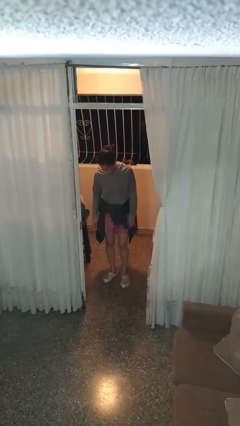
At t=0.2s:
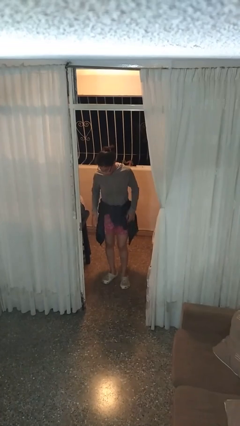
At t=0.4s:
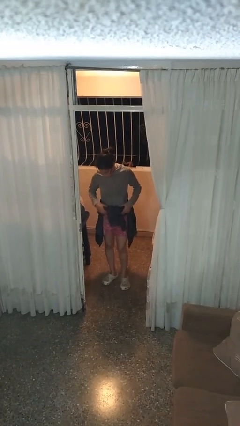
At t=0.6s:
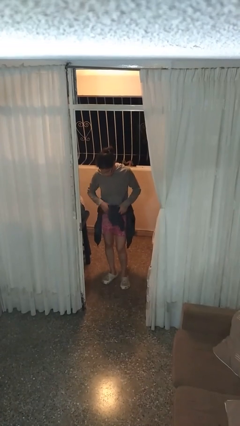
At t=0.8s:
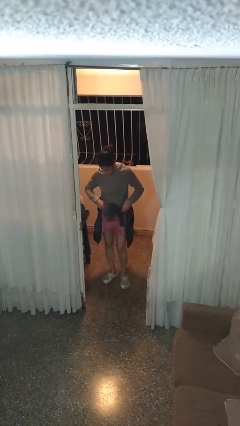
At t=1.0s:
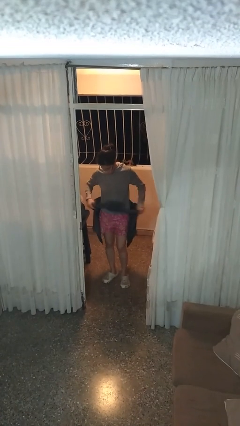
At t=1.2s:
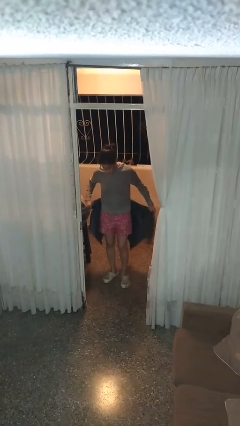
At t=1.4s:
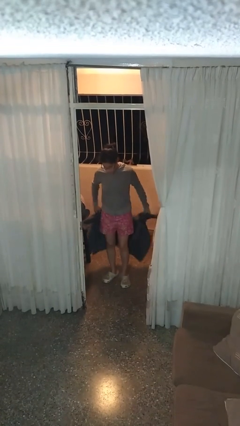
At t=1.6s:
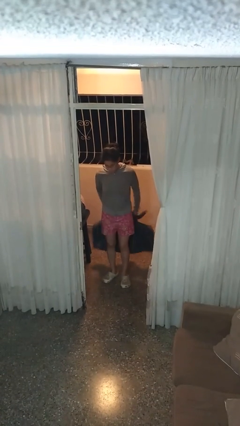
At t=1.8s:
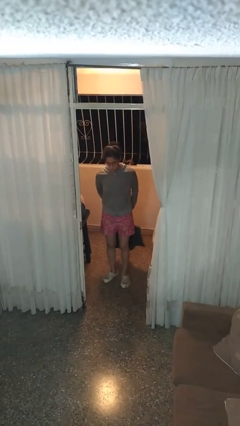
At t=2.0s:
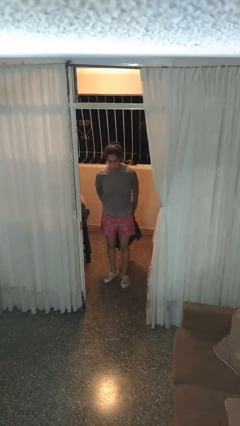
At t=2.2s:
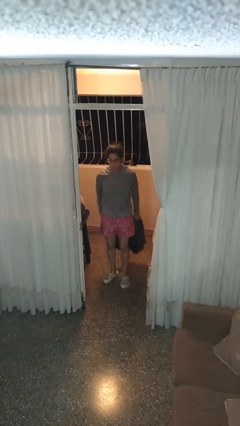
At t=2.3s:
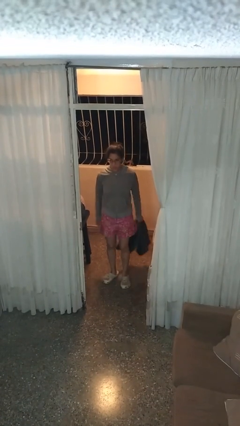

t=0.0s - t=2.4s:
person unties jacket around waist

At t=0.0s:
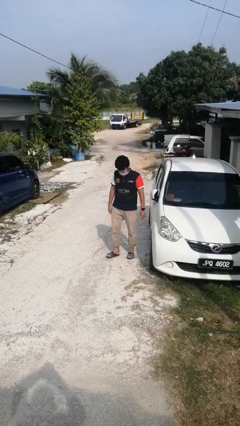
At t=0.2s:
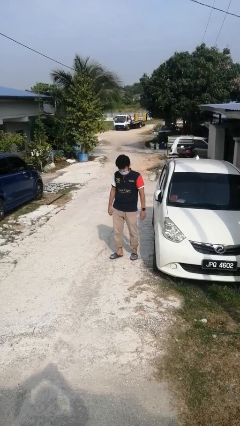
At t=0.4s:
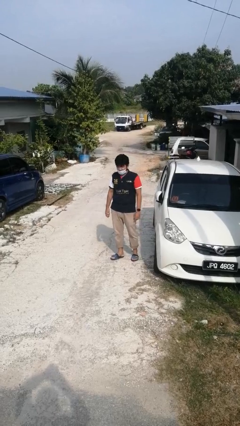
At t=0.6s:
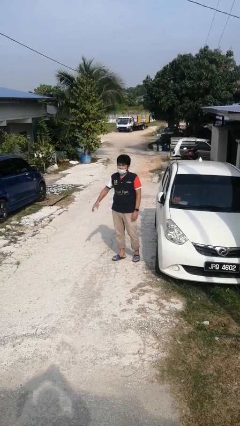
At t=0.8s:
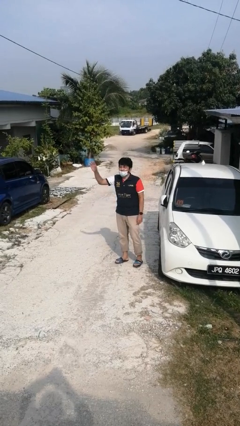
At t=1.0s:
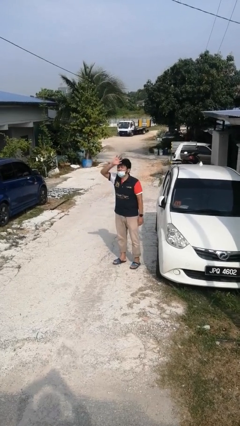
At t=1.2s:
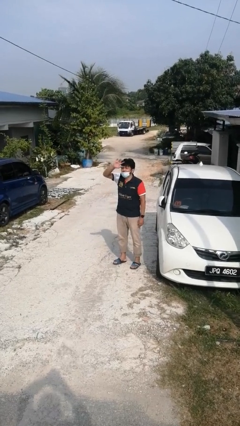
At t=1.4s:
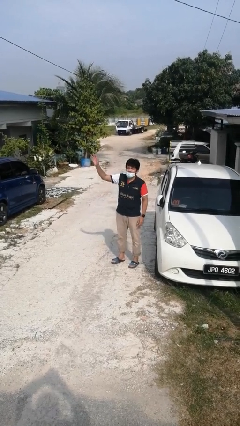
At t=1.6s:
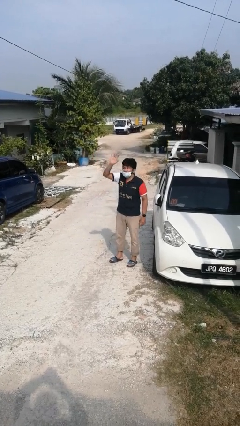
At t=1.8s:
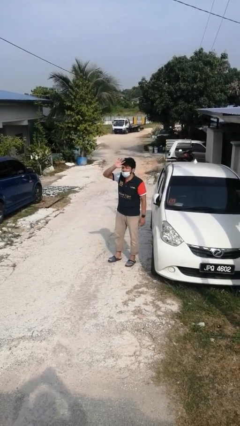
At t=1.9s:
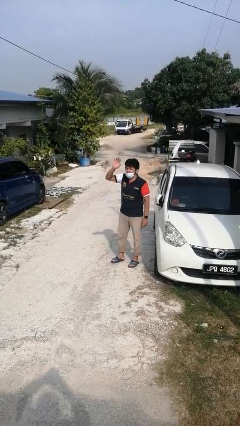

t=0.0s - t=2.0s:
person waves at person

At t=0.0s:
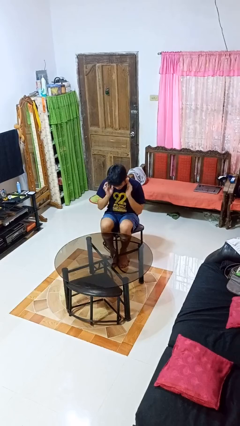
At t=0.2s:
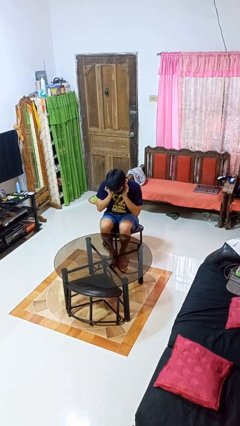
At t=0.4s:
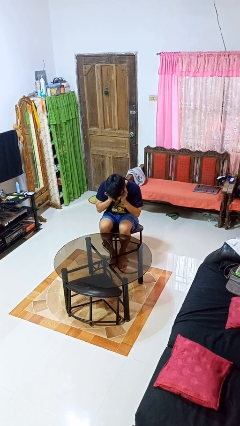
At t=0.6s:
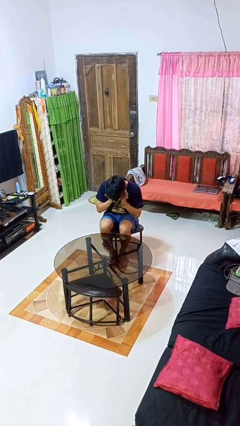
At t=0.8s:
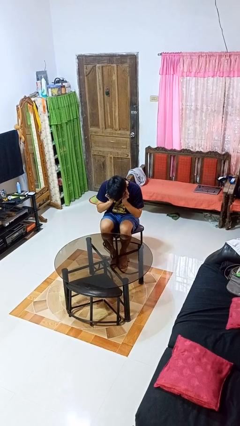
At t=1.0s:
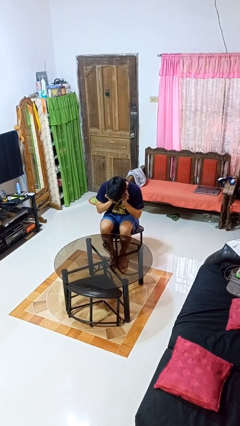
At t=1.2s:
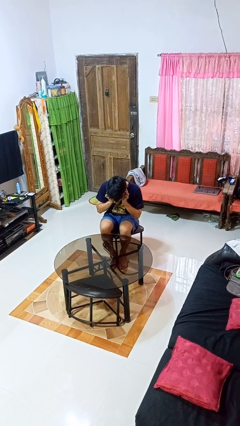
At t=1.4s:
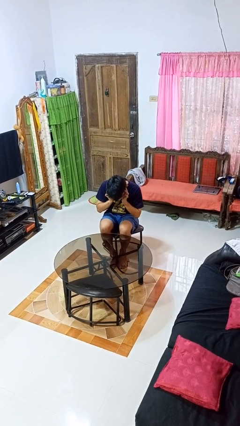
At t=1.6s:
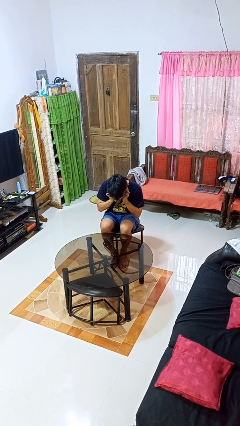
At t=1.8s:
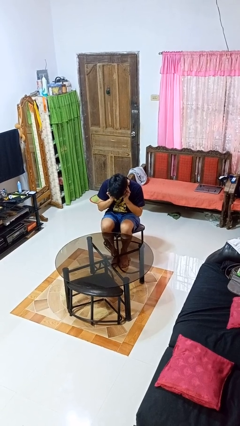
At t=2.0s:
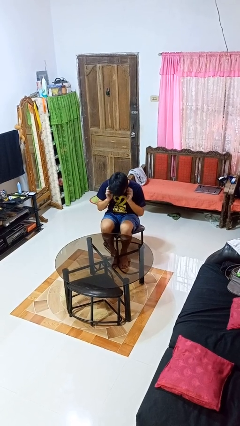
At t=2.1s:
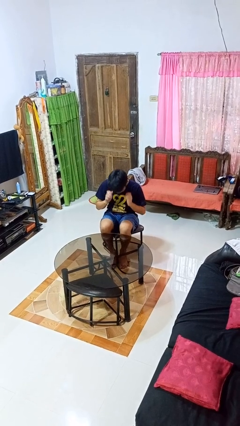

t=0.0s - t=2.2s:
person puts fingers in ear

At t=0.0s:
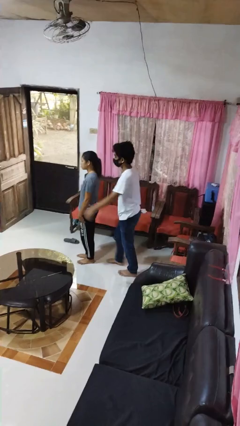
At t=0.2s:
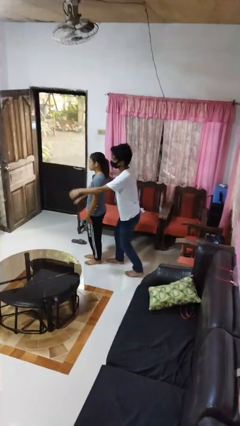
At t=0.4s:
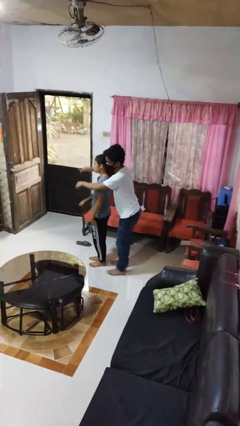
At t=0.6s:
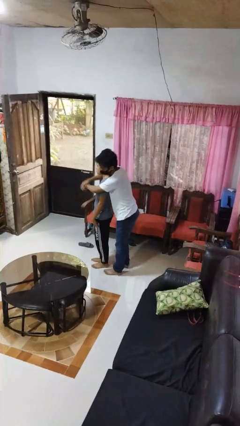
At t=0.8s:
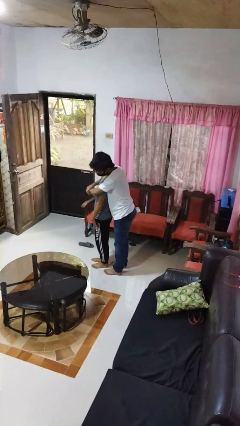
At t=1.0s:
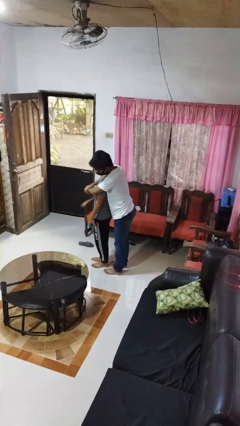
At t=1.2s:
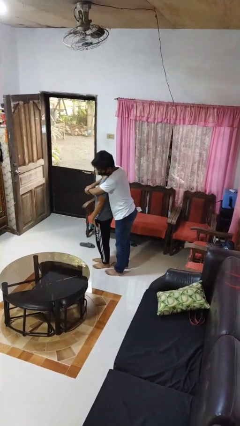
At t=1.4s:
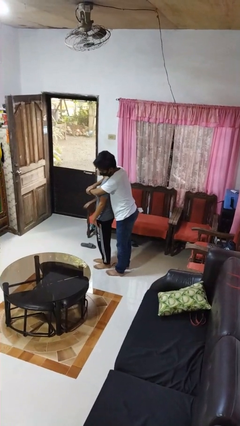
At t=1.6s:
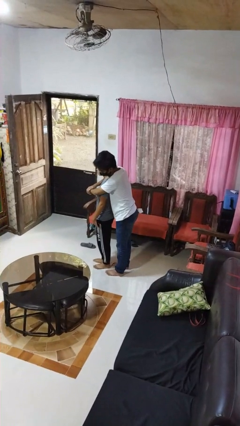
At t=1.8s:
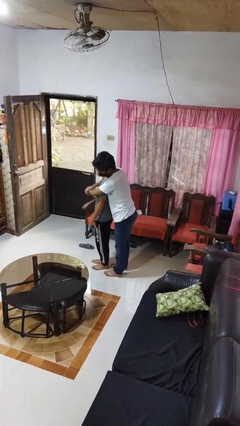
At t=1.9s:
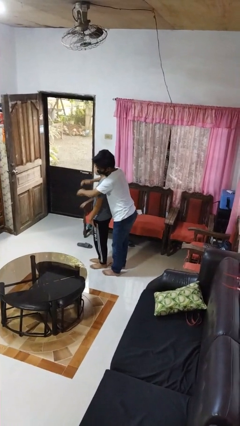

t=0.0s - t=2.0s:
person hugs person from behind

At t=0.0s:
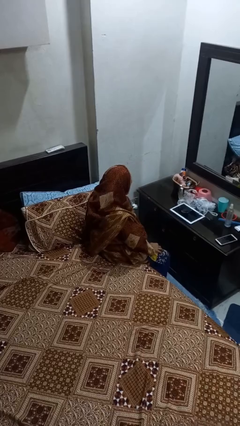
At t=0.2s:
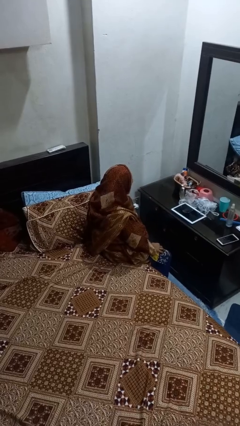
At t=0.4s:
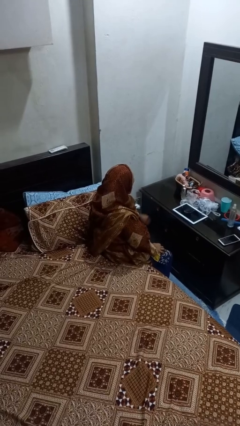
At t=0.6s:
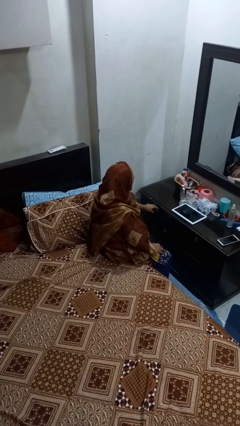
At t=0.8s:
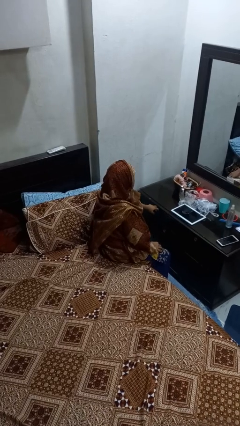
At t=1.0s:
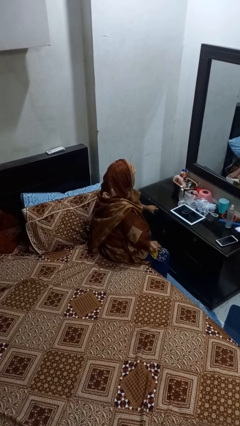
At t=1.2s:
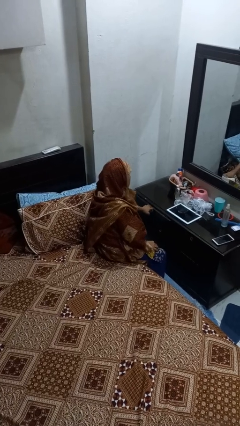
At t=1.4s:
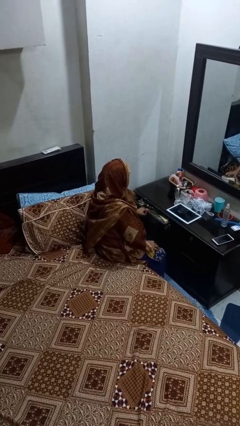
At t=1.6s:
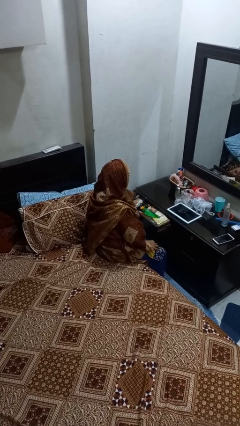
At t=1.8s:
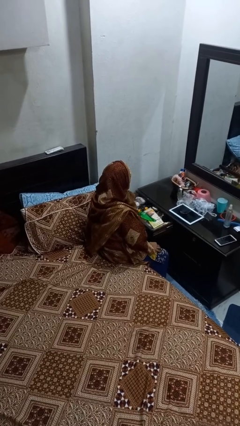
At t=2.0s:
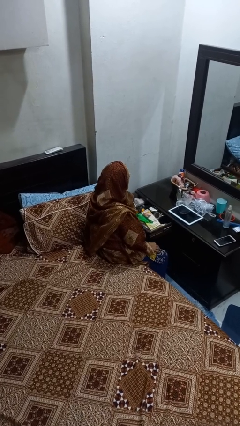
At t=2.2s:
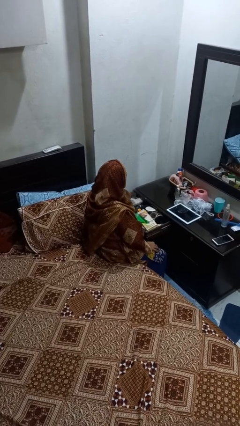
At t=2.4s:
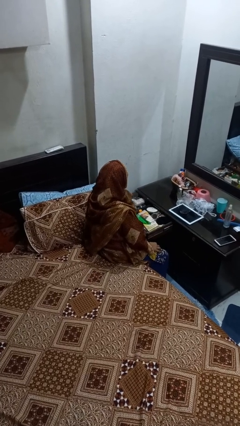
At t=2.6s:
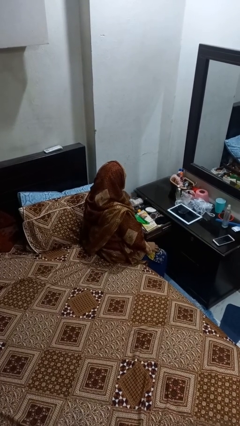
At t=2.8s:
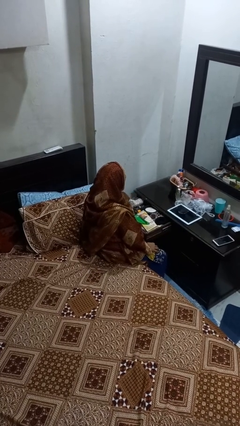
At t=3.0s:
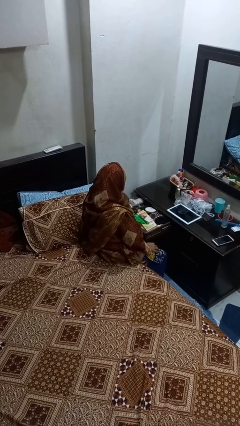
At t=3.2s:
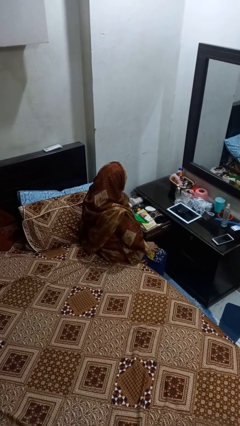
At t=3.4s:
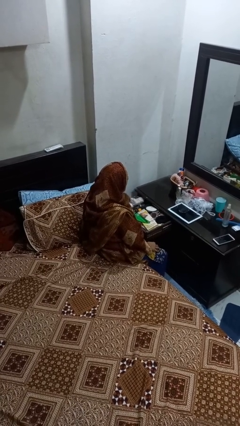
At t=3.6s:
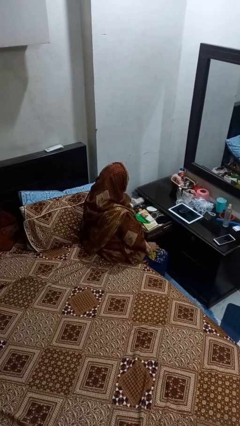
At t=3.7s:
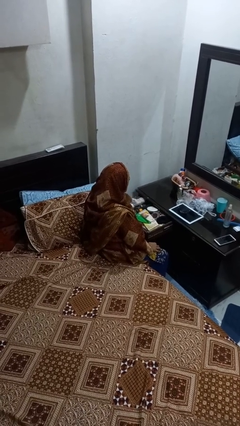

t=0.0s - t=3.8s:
person opens dresser drawer

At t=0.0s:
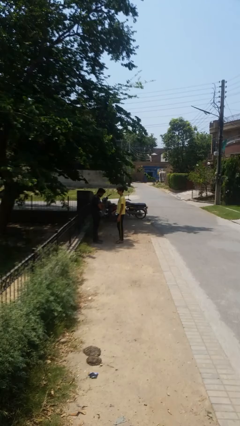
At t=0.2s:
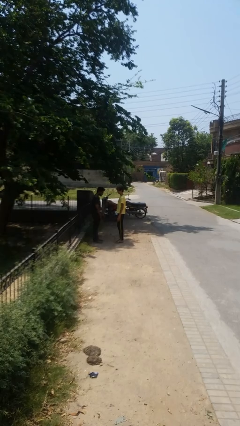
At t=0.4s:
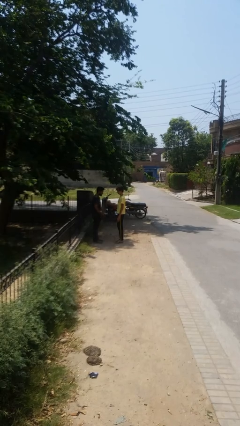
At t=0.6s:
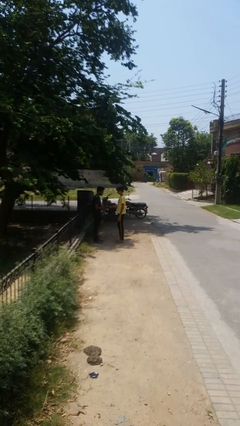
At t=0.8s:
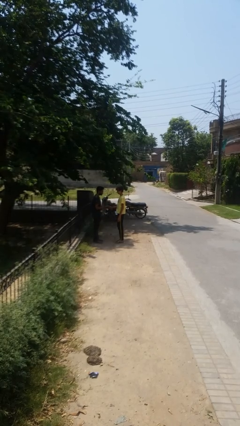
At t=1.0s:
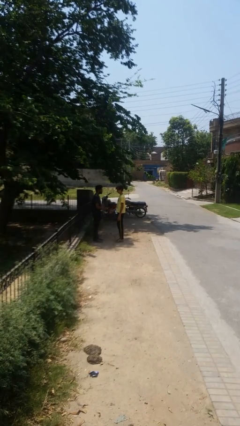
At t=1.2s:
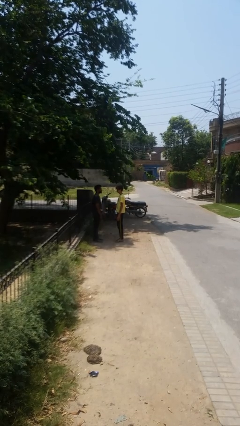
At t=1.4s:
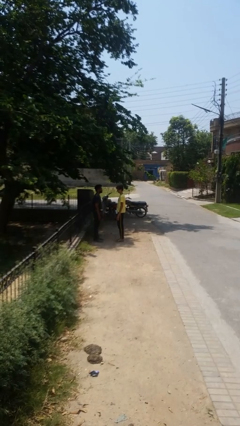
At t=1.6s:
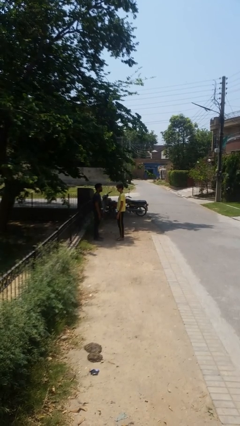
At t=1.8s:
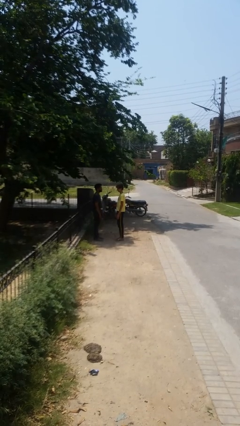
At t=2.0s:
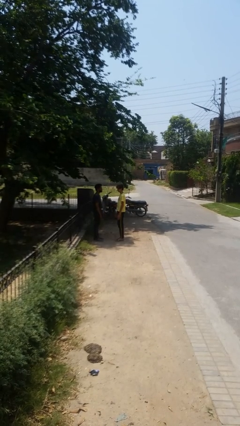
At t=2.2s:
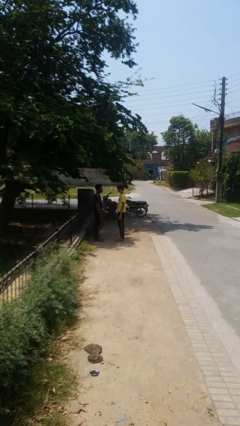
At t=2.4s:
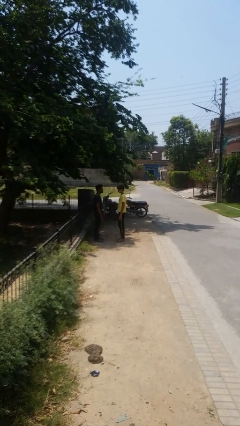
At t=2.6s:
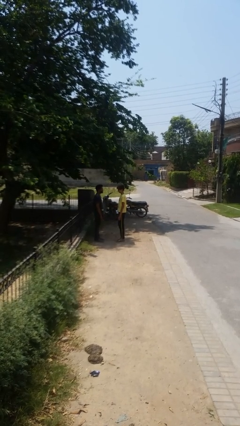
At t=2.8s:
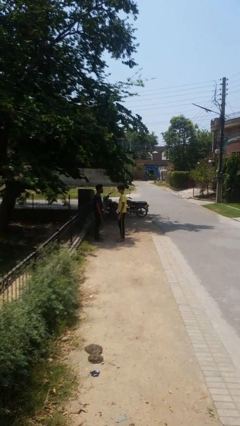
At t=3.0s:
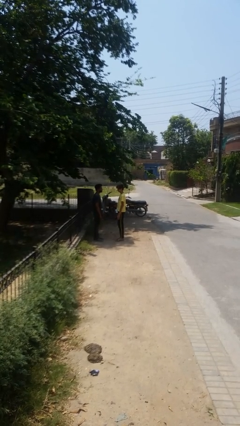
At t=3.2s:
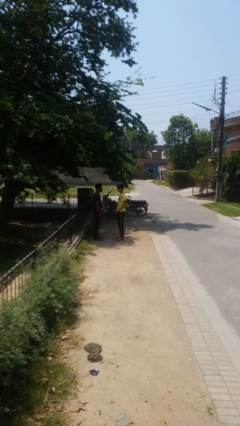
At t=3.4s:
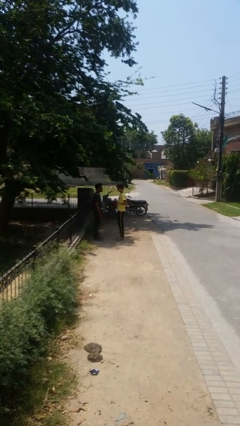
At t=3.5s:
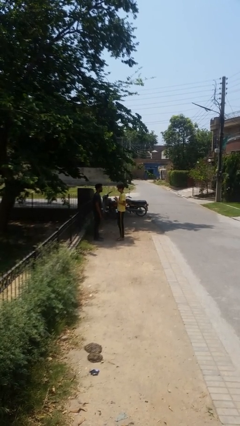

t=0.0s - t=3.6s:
person highfives hand

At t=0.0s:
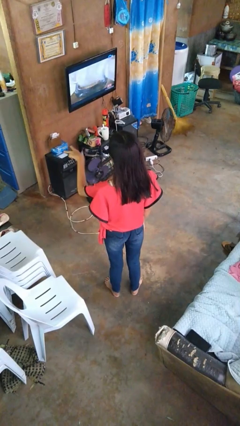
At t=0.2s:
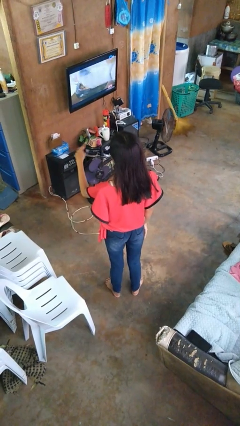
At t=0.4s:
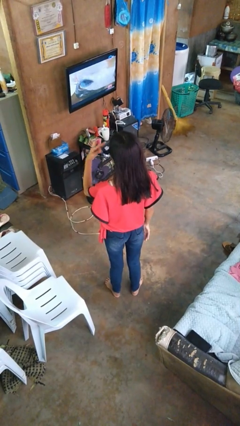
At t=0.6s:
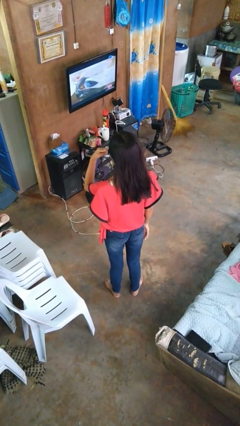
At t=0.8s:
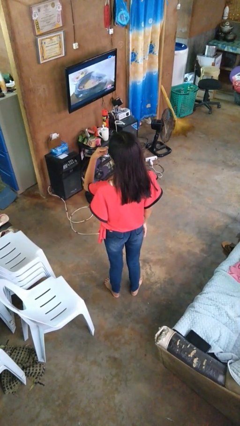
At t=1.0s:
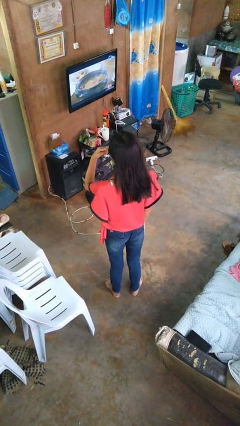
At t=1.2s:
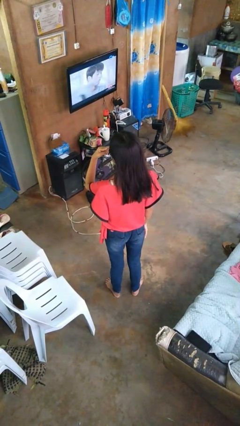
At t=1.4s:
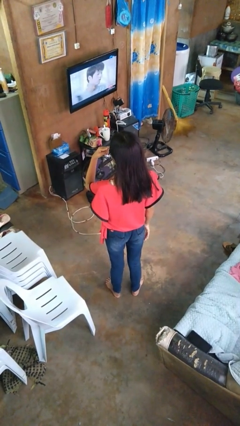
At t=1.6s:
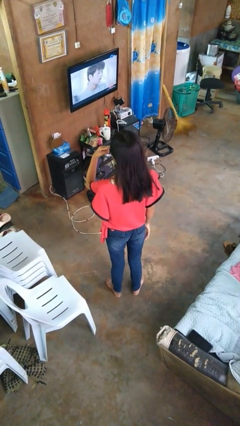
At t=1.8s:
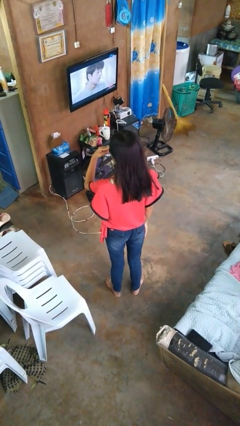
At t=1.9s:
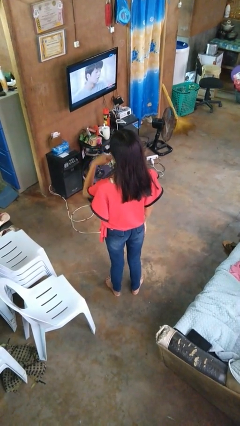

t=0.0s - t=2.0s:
person gestures watch closely
